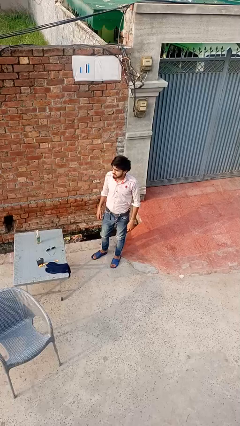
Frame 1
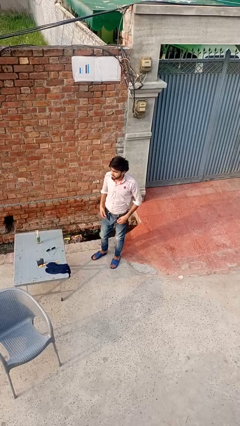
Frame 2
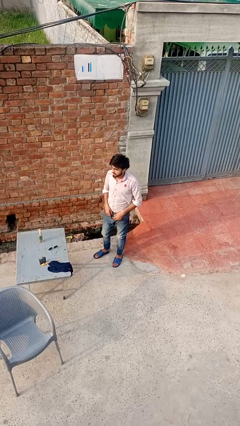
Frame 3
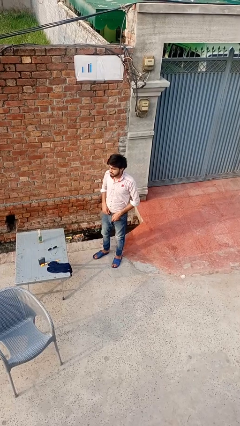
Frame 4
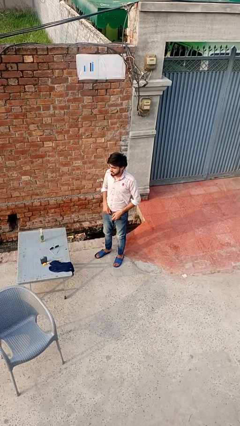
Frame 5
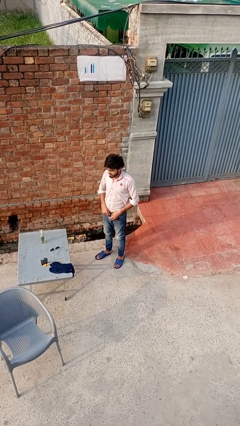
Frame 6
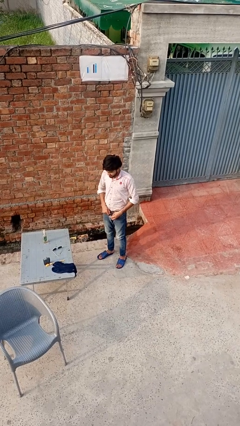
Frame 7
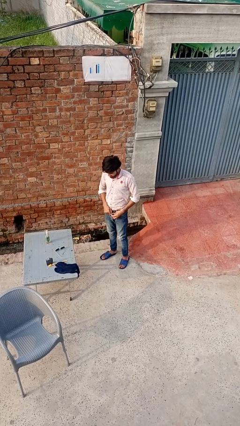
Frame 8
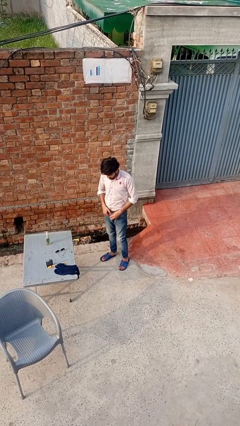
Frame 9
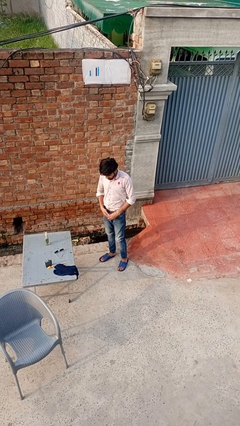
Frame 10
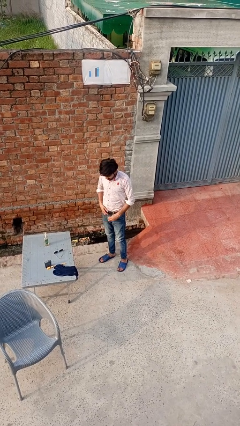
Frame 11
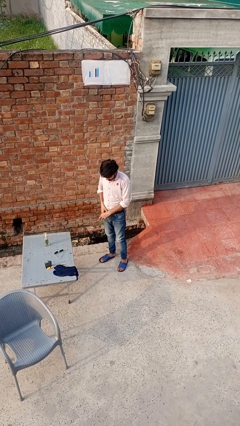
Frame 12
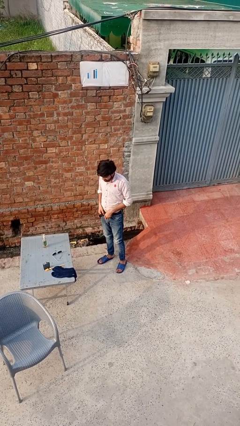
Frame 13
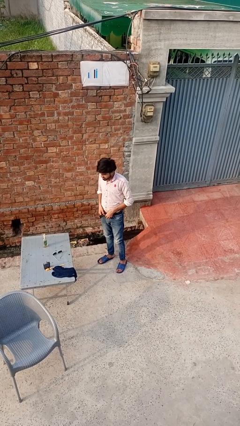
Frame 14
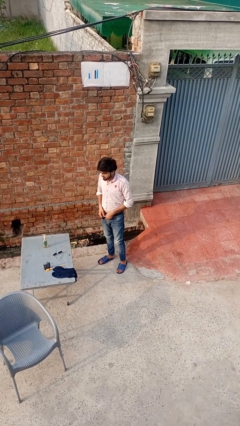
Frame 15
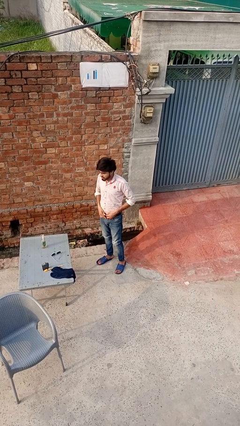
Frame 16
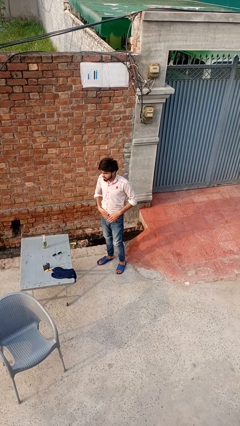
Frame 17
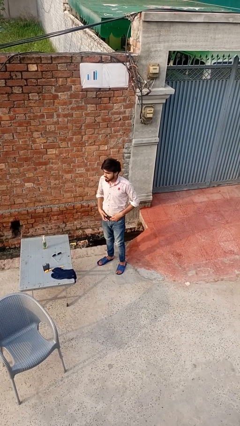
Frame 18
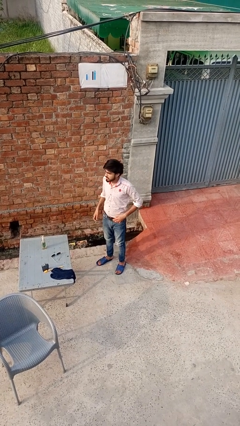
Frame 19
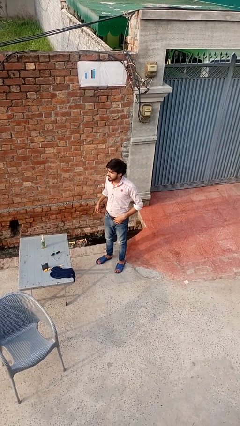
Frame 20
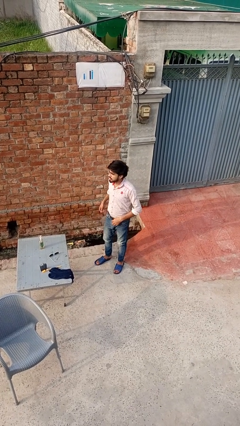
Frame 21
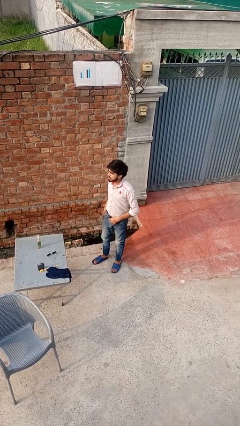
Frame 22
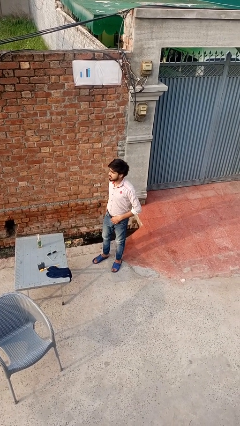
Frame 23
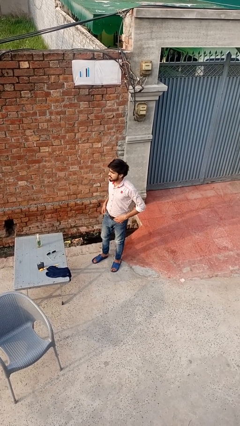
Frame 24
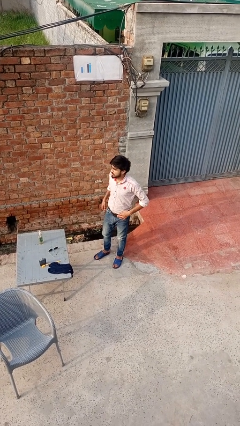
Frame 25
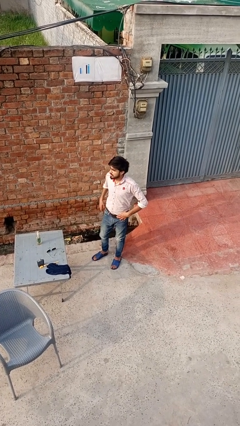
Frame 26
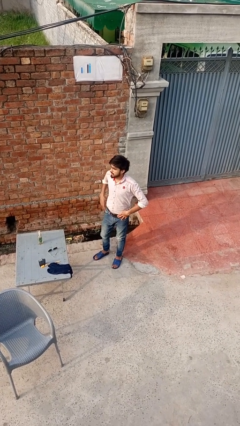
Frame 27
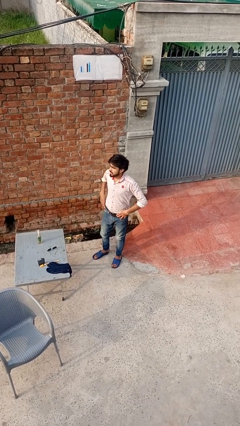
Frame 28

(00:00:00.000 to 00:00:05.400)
person puts on belt

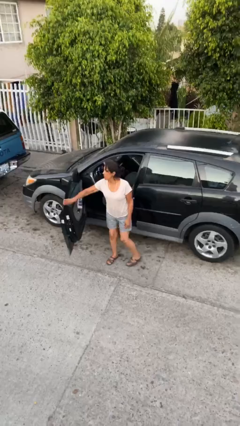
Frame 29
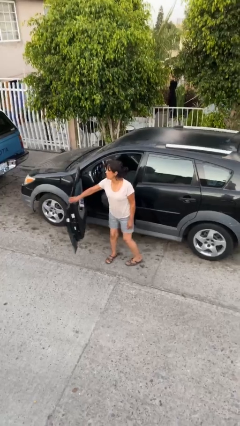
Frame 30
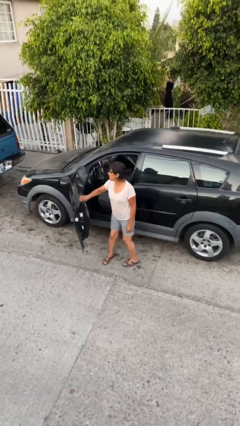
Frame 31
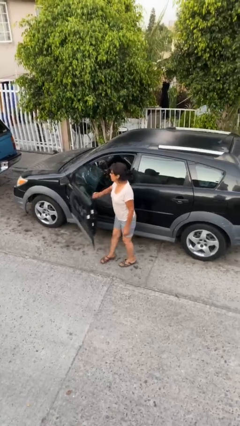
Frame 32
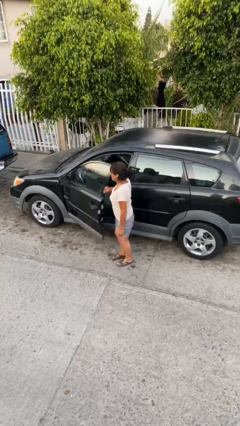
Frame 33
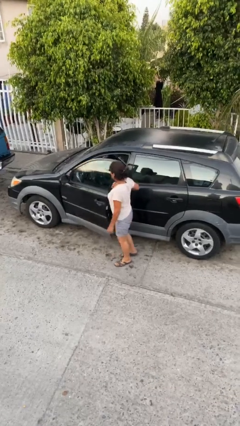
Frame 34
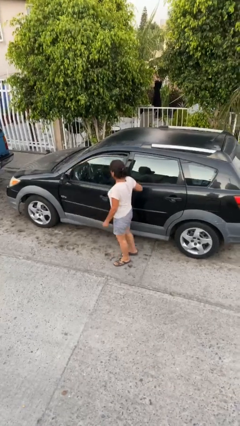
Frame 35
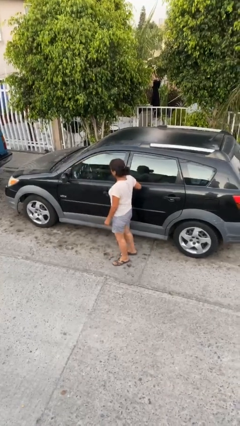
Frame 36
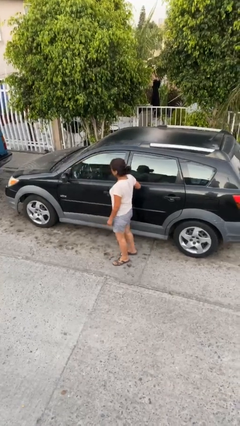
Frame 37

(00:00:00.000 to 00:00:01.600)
person closes car door

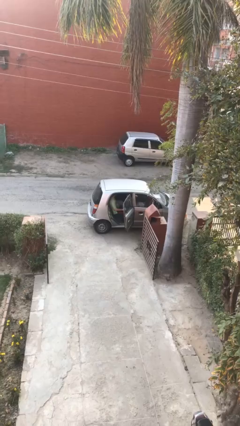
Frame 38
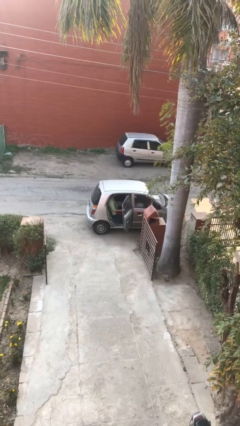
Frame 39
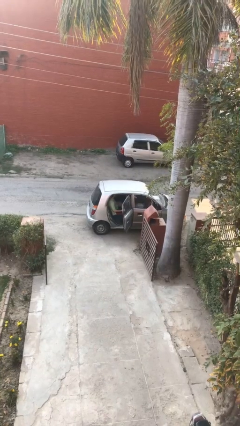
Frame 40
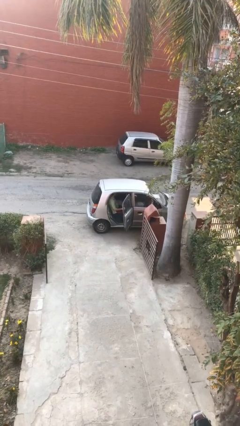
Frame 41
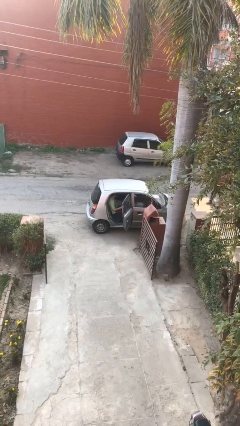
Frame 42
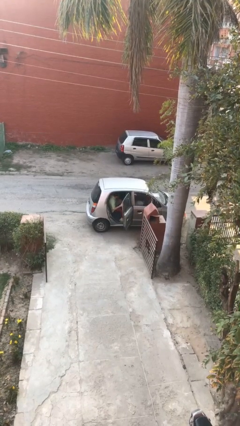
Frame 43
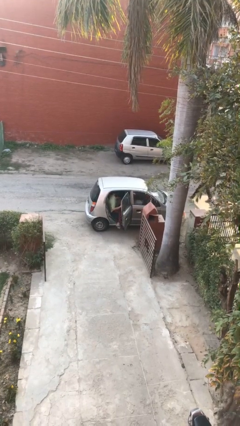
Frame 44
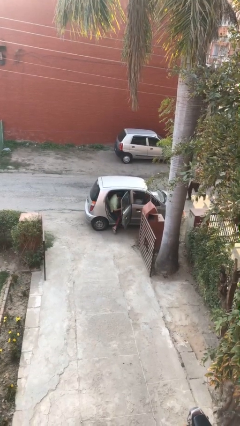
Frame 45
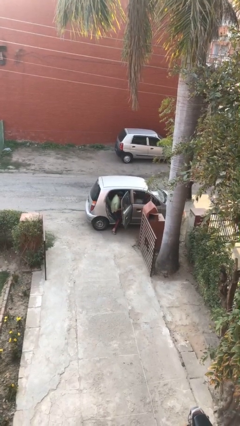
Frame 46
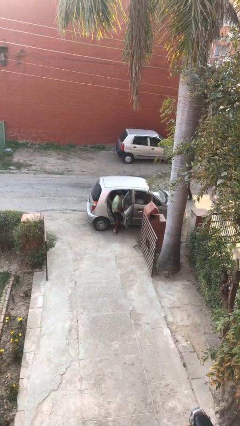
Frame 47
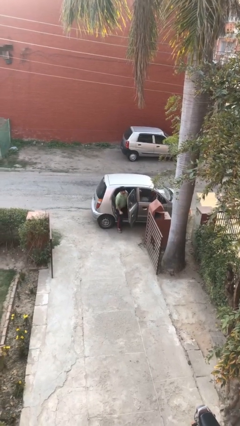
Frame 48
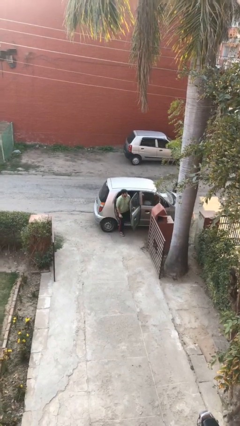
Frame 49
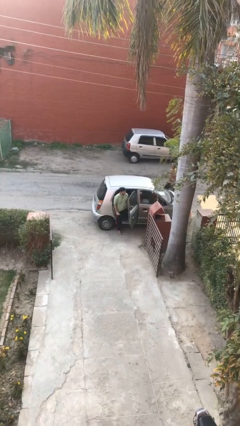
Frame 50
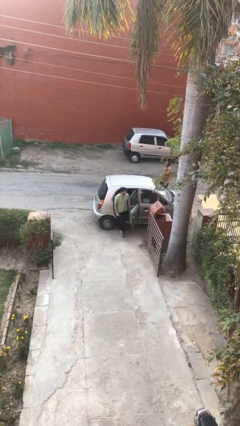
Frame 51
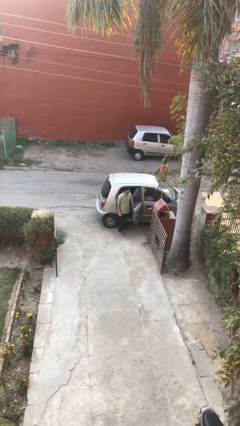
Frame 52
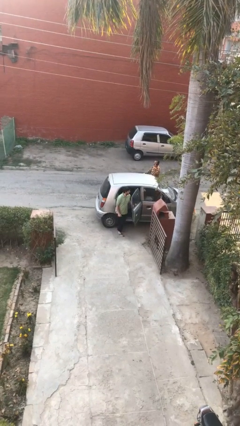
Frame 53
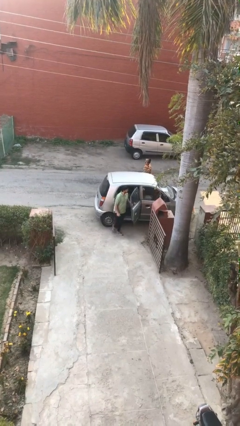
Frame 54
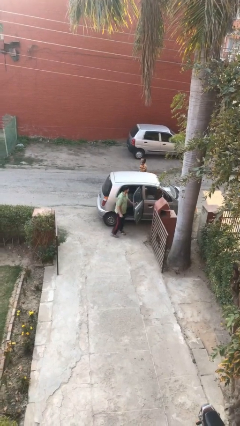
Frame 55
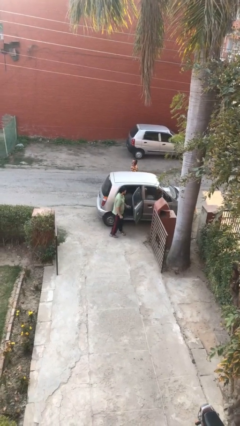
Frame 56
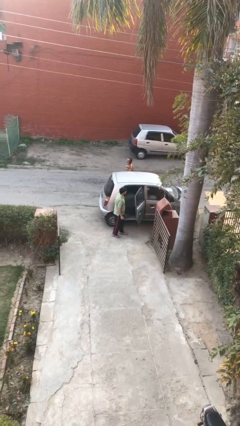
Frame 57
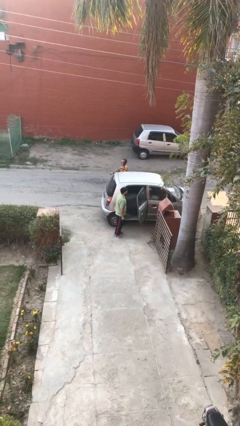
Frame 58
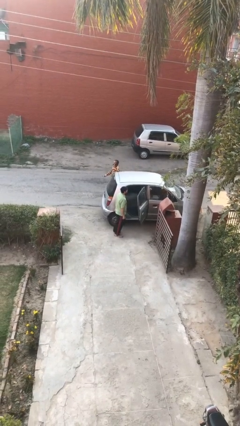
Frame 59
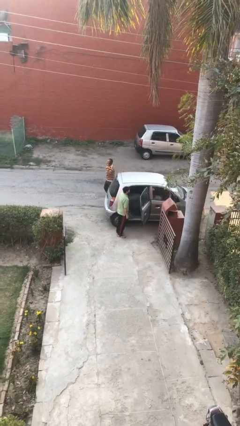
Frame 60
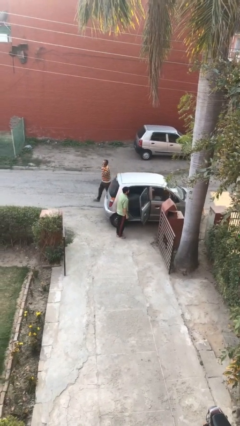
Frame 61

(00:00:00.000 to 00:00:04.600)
person exits car

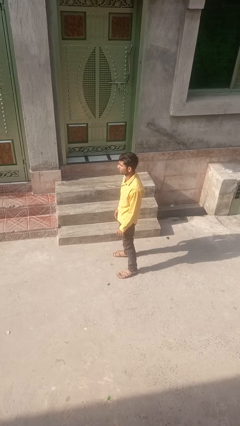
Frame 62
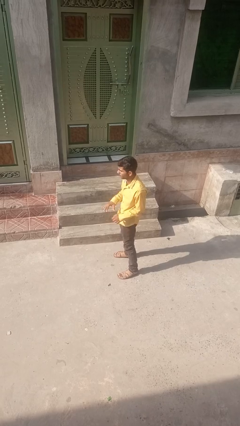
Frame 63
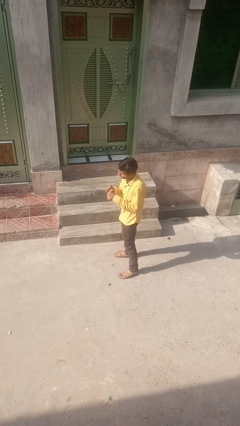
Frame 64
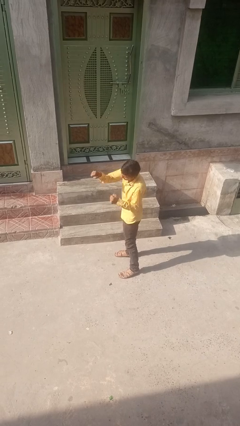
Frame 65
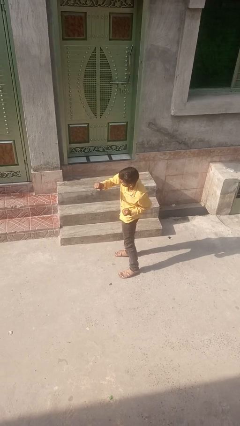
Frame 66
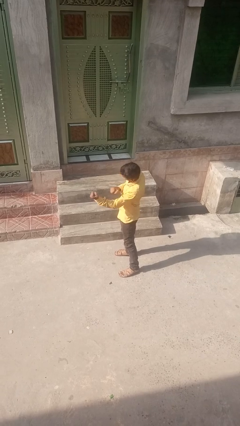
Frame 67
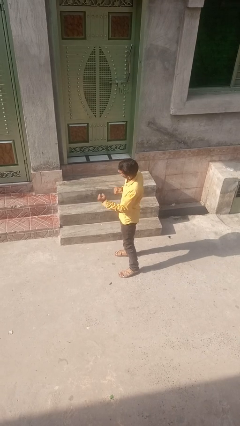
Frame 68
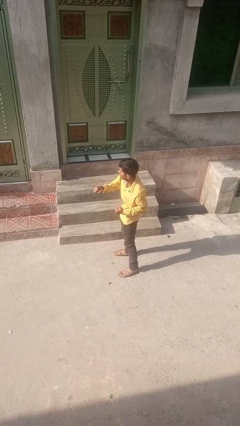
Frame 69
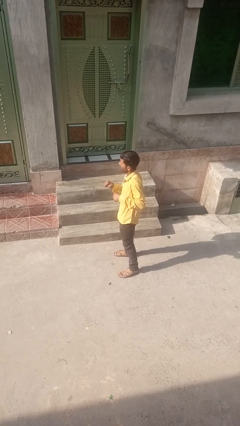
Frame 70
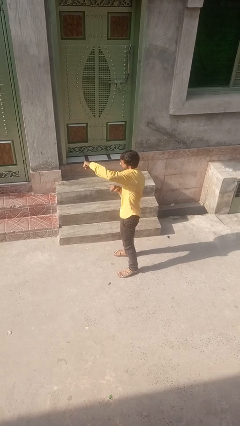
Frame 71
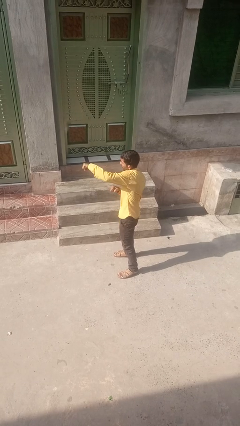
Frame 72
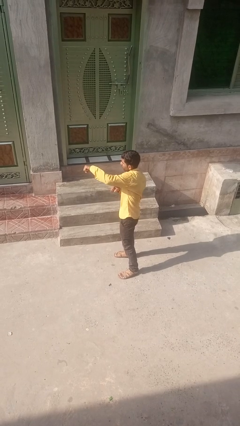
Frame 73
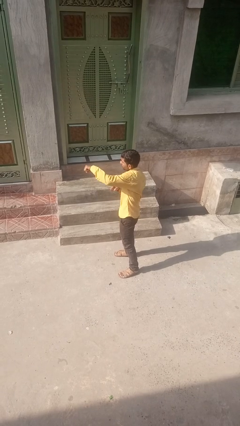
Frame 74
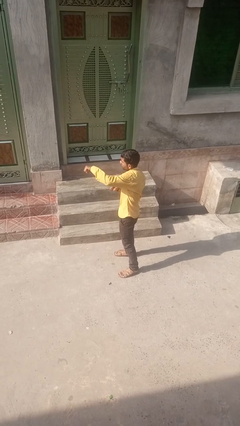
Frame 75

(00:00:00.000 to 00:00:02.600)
person punches

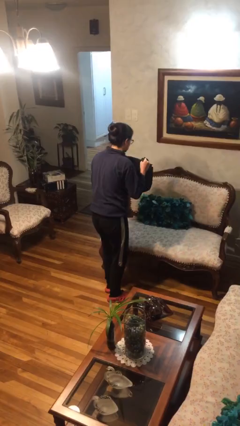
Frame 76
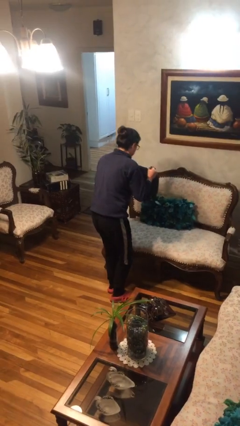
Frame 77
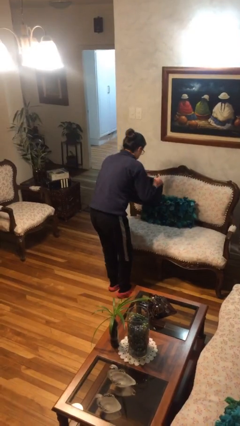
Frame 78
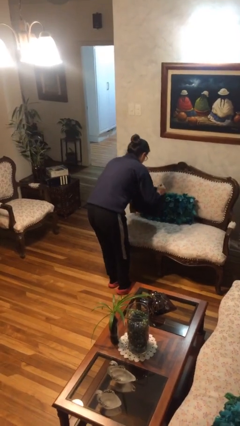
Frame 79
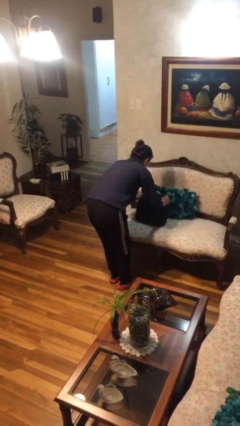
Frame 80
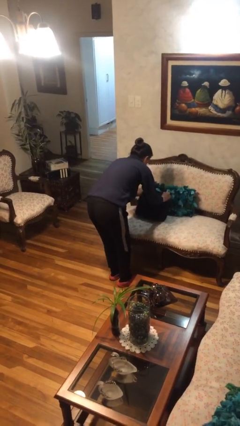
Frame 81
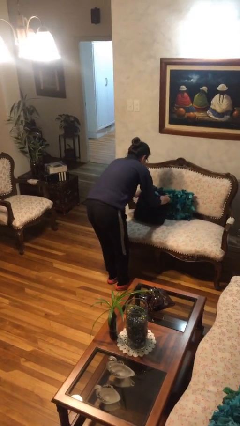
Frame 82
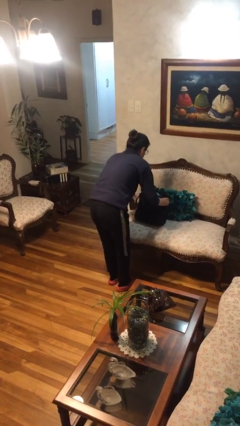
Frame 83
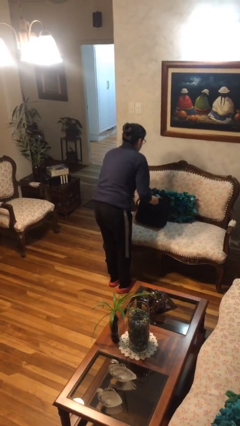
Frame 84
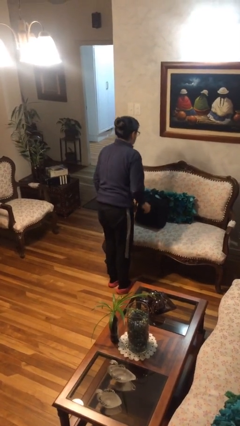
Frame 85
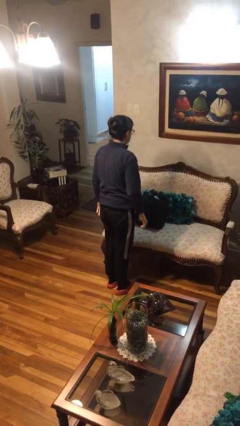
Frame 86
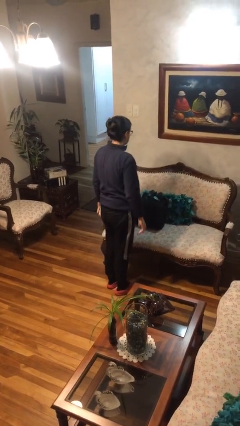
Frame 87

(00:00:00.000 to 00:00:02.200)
person puts down object on couch

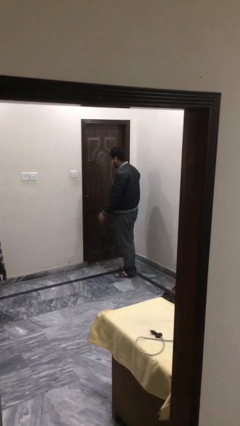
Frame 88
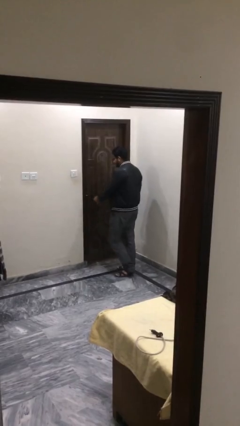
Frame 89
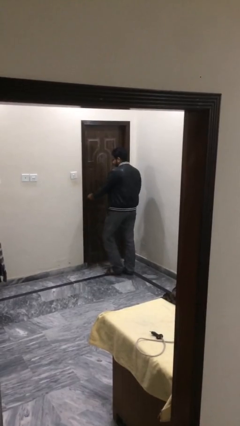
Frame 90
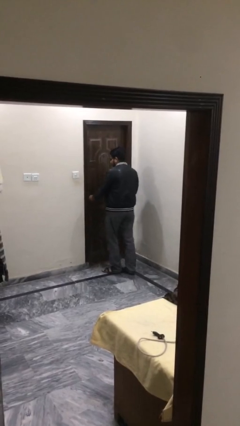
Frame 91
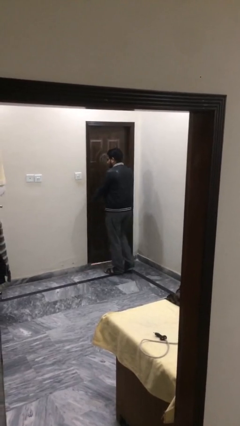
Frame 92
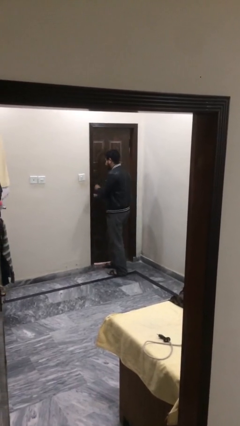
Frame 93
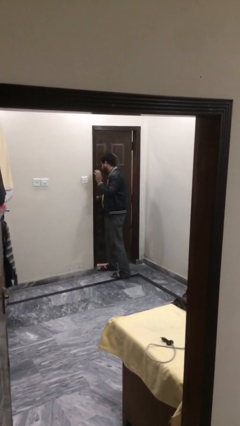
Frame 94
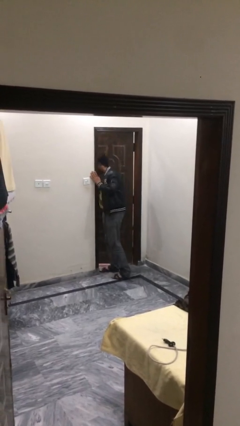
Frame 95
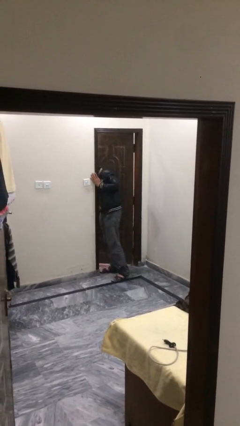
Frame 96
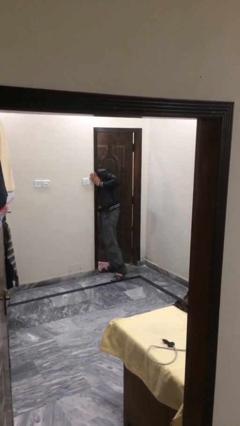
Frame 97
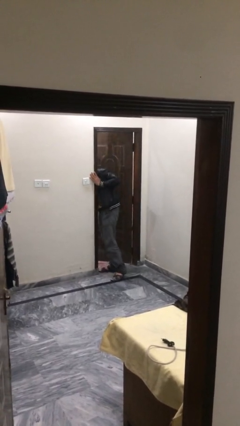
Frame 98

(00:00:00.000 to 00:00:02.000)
person opens facility door
